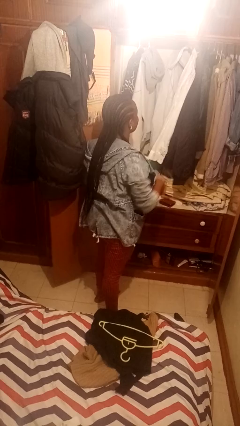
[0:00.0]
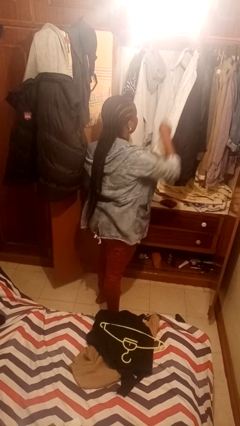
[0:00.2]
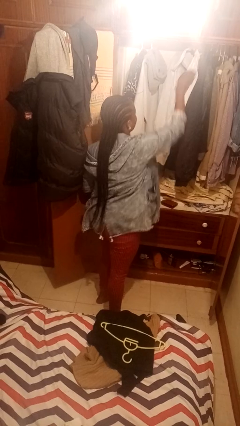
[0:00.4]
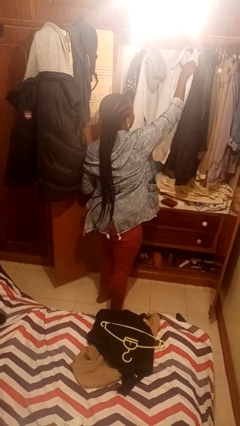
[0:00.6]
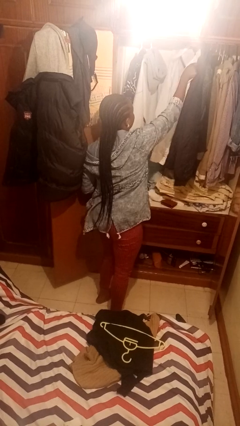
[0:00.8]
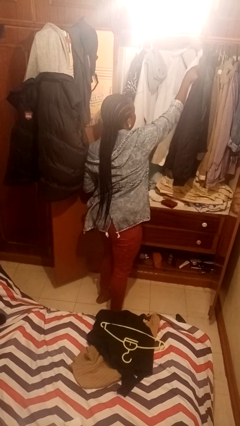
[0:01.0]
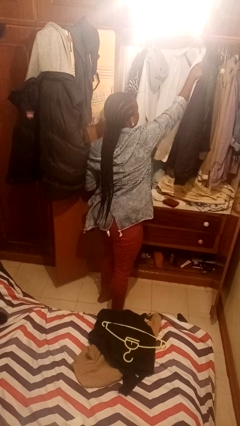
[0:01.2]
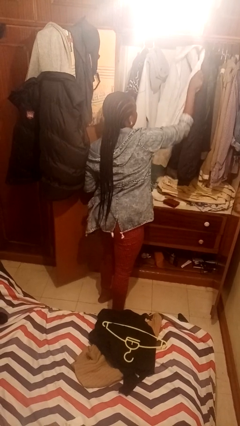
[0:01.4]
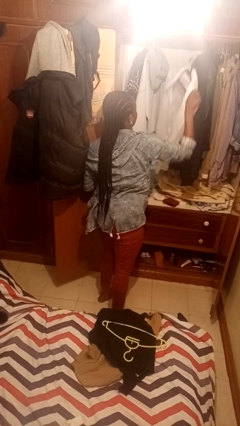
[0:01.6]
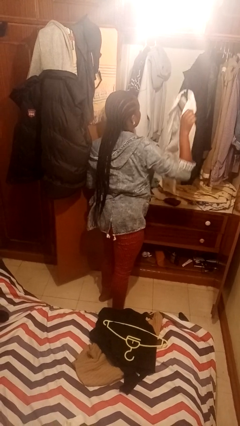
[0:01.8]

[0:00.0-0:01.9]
person takes clothes from closet

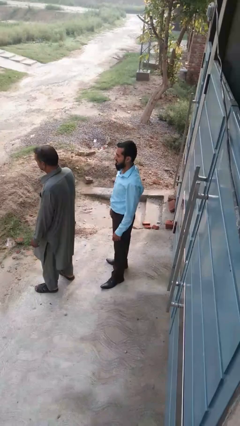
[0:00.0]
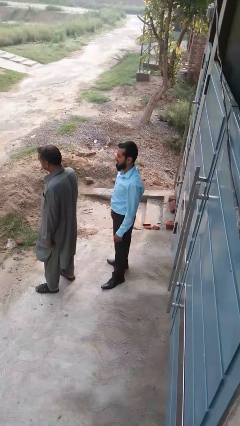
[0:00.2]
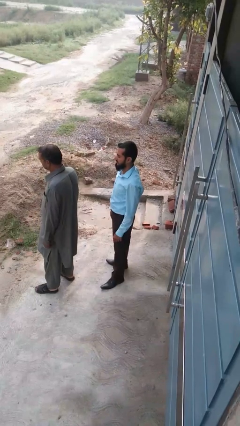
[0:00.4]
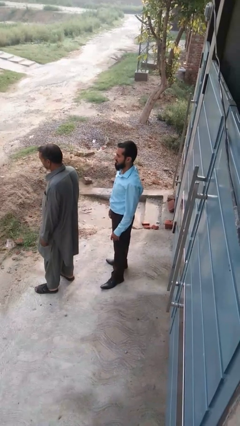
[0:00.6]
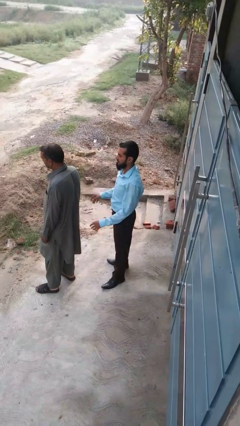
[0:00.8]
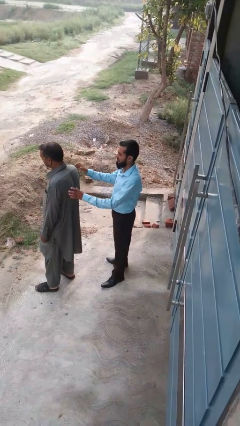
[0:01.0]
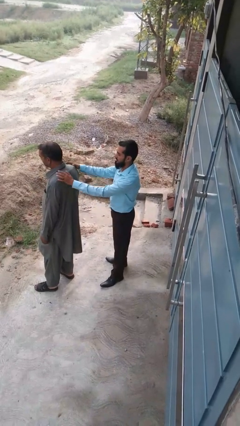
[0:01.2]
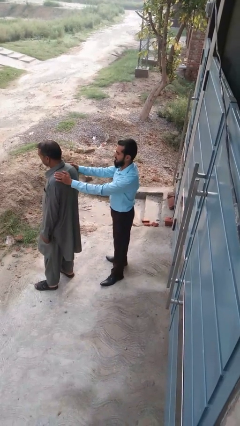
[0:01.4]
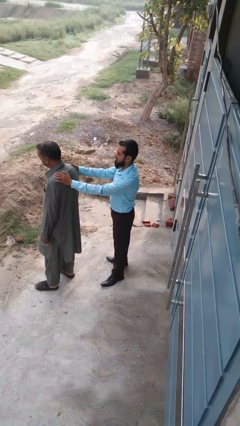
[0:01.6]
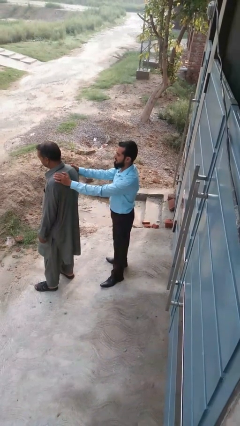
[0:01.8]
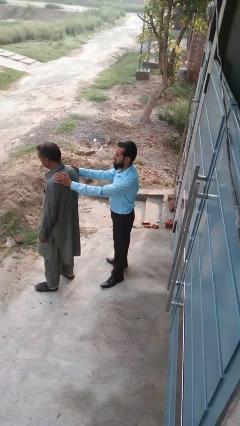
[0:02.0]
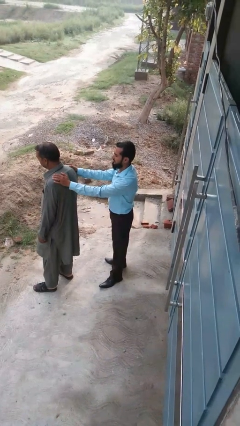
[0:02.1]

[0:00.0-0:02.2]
person grabs person by shoulder

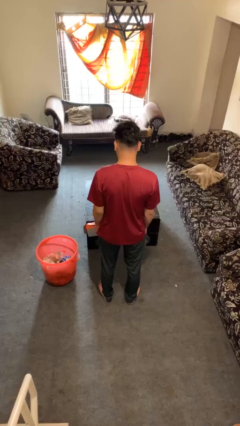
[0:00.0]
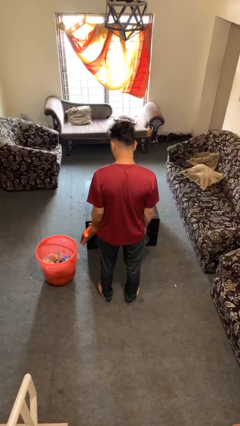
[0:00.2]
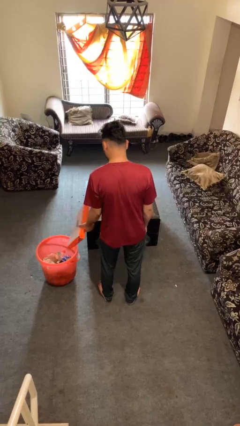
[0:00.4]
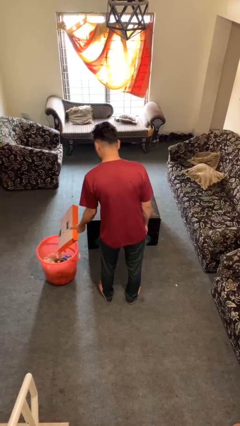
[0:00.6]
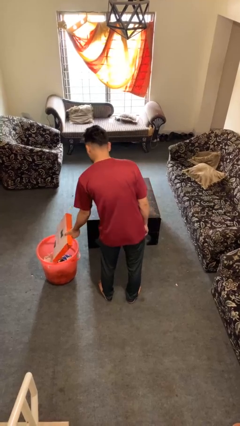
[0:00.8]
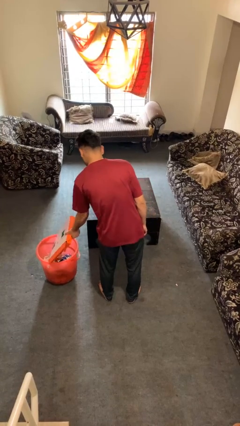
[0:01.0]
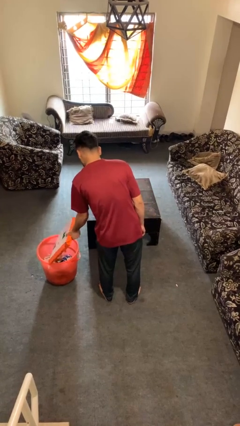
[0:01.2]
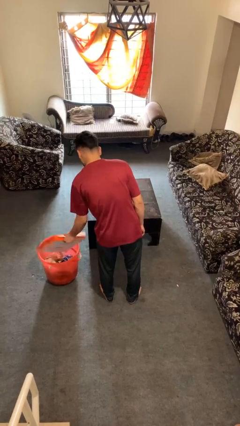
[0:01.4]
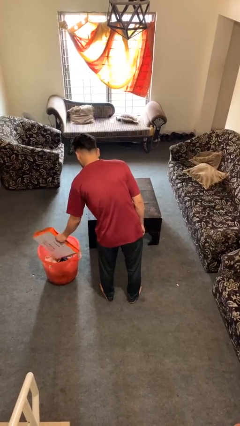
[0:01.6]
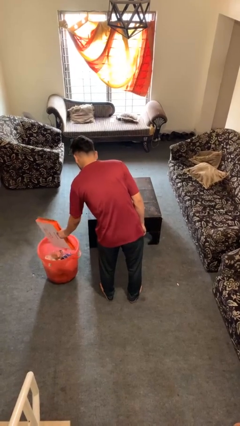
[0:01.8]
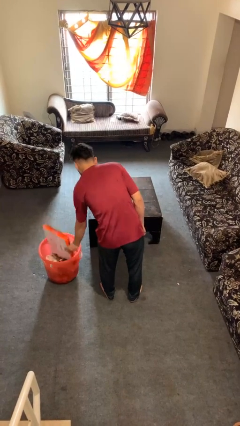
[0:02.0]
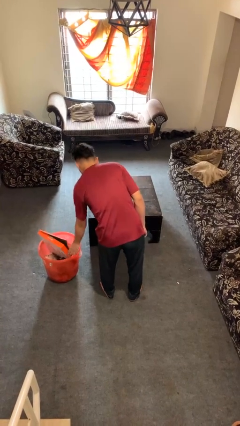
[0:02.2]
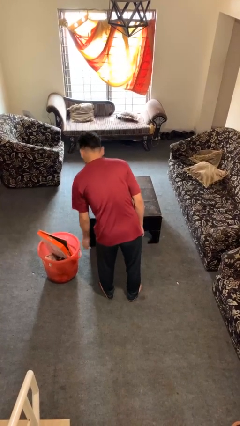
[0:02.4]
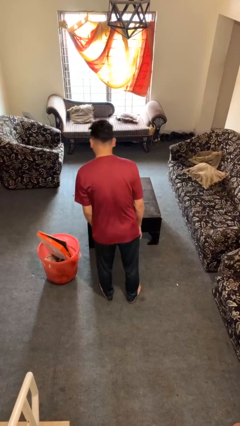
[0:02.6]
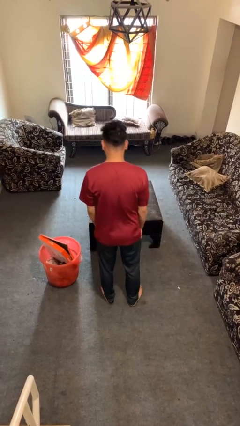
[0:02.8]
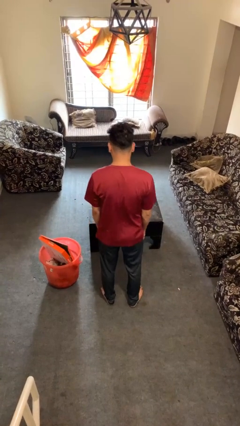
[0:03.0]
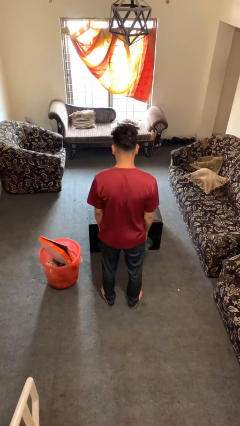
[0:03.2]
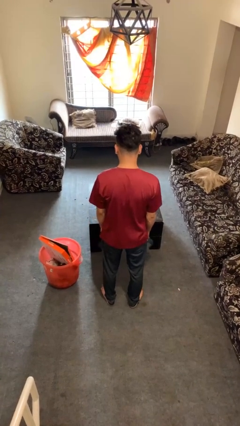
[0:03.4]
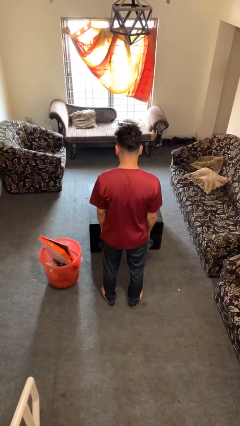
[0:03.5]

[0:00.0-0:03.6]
person puts object into basket

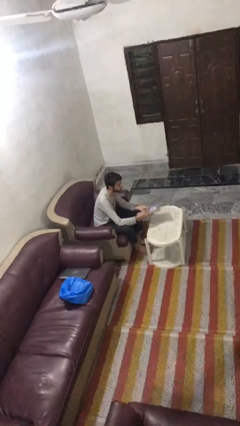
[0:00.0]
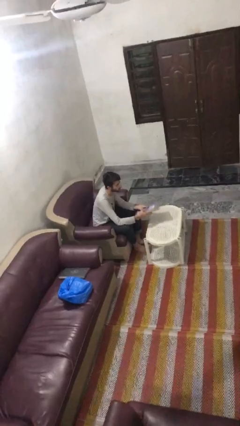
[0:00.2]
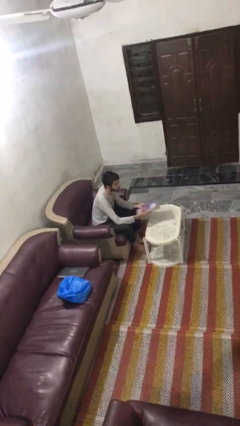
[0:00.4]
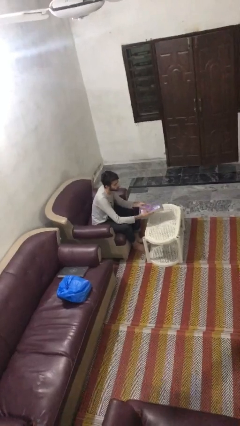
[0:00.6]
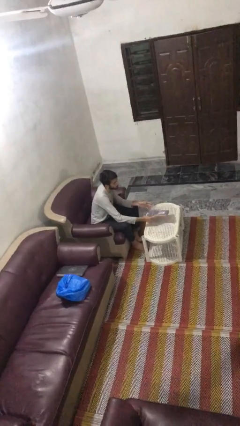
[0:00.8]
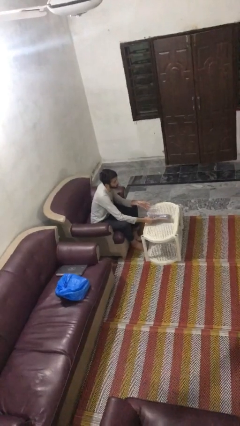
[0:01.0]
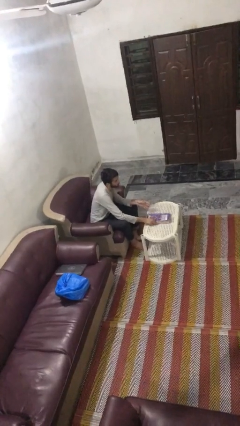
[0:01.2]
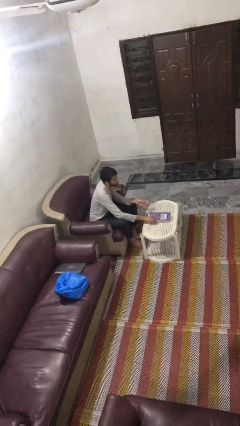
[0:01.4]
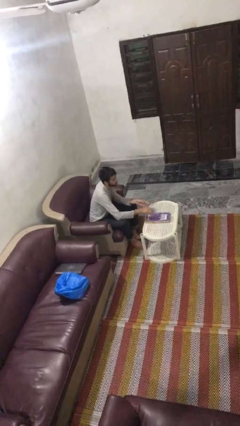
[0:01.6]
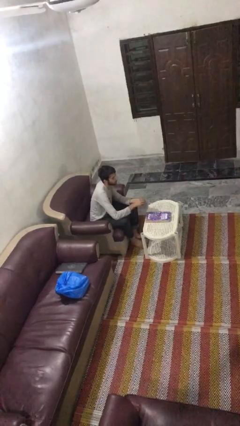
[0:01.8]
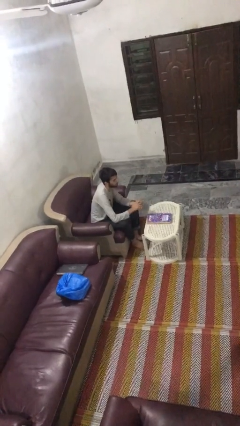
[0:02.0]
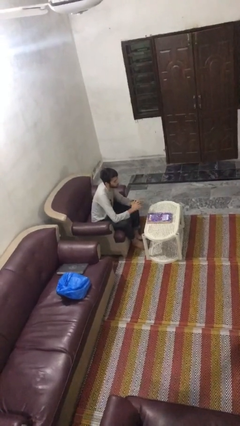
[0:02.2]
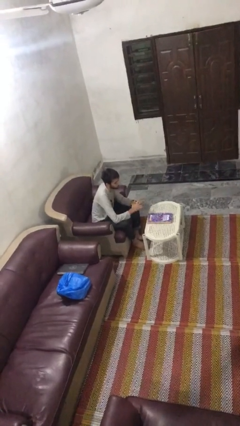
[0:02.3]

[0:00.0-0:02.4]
person puts down object on table

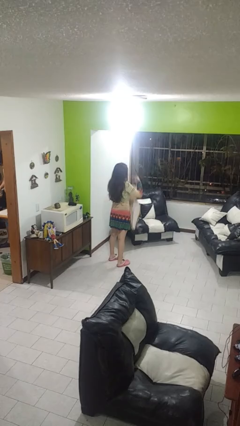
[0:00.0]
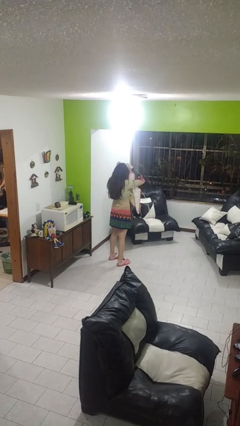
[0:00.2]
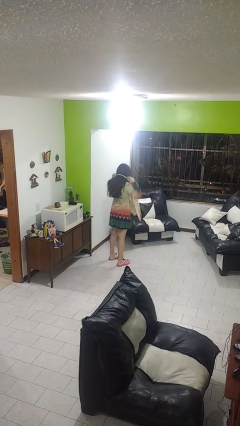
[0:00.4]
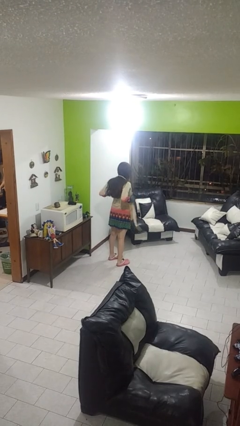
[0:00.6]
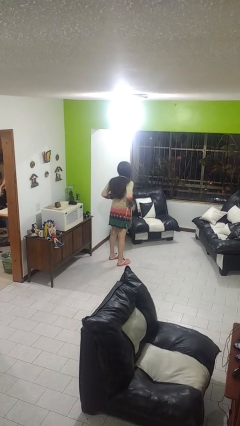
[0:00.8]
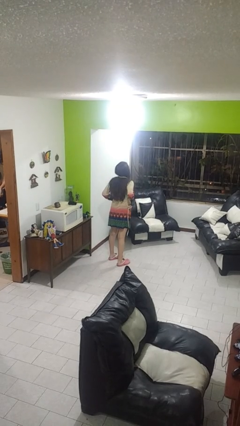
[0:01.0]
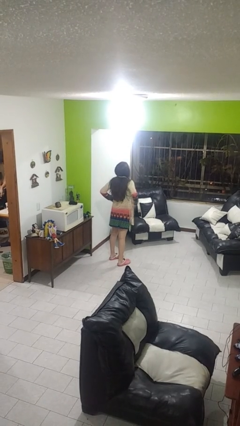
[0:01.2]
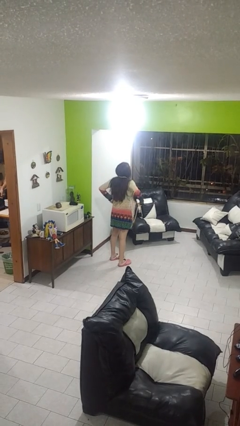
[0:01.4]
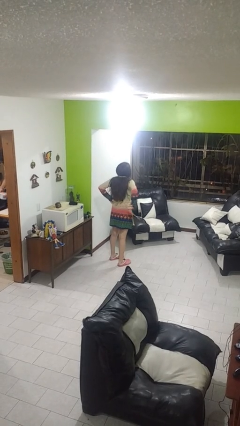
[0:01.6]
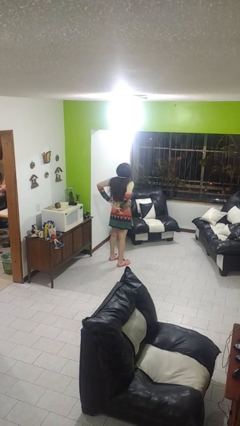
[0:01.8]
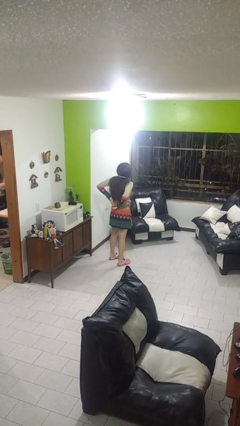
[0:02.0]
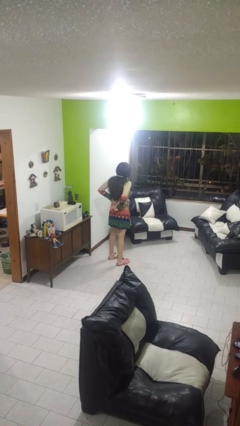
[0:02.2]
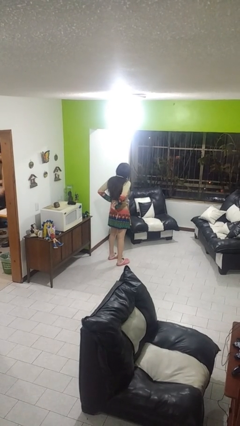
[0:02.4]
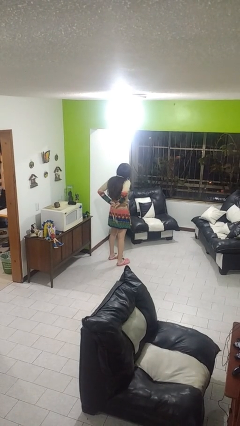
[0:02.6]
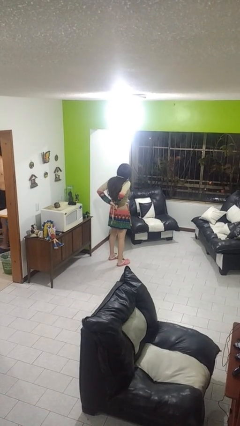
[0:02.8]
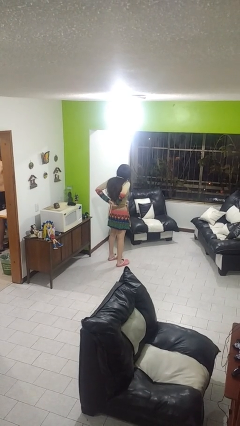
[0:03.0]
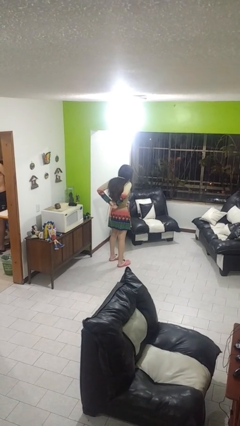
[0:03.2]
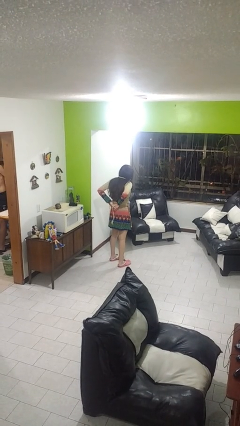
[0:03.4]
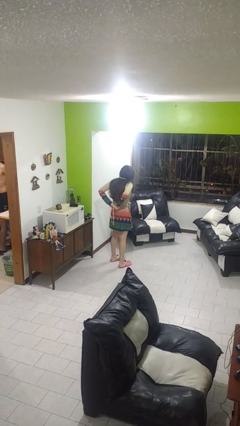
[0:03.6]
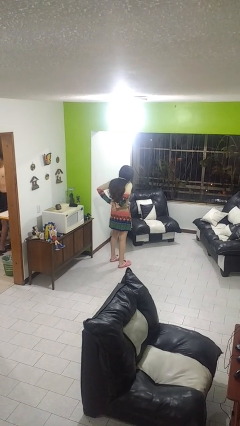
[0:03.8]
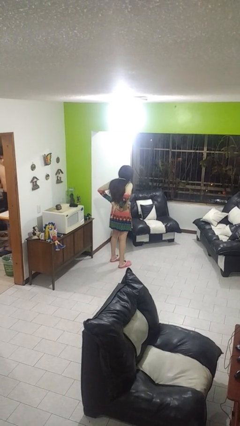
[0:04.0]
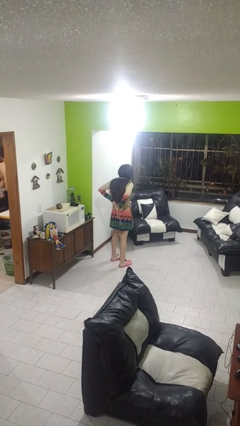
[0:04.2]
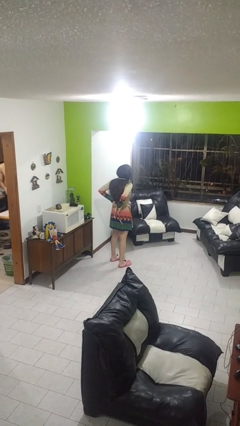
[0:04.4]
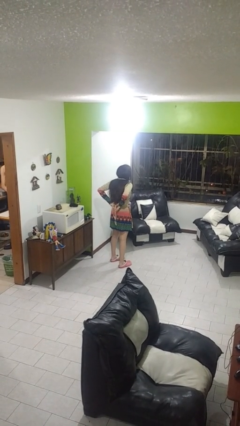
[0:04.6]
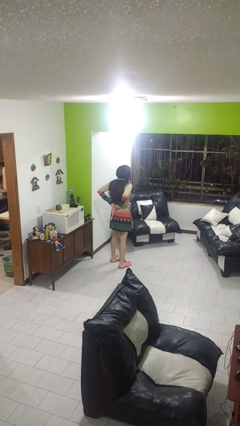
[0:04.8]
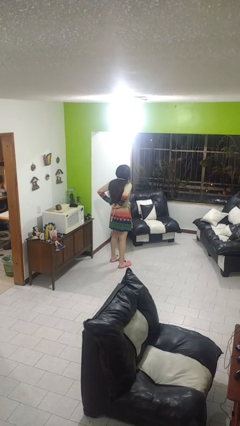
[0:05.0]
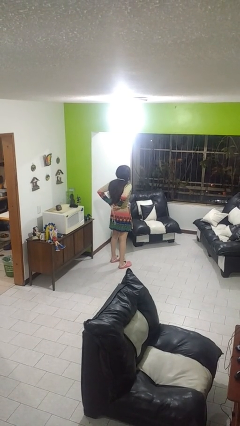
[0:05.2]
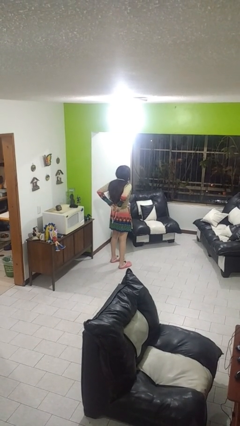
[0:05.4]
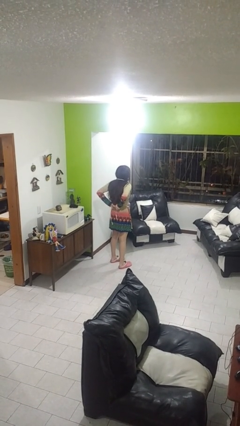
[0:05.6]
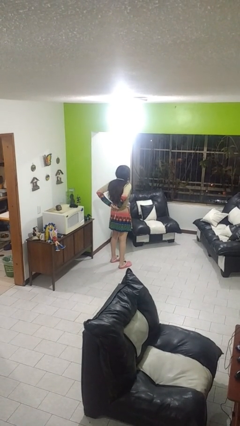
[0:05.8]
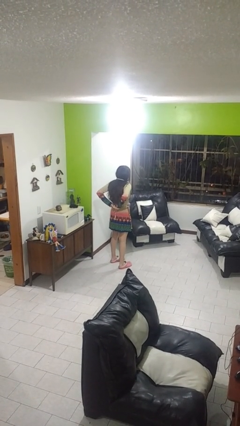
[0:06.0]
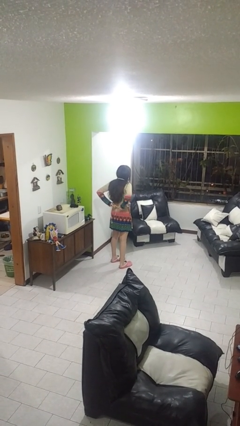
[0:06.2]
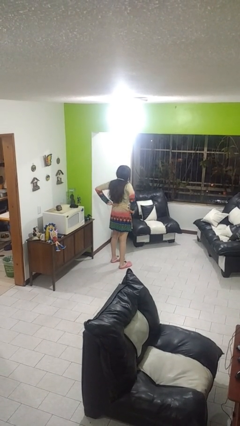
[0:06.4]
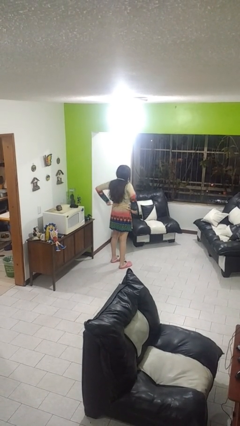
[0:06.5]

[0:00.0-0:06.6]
person puts on apron

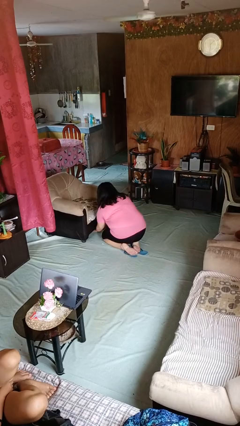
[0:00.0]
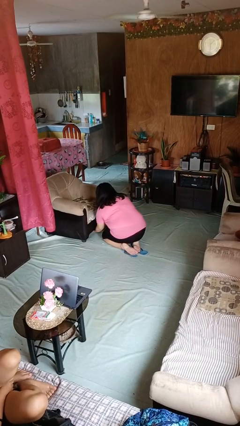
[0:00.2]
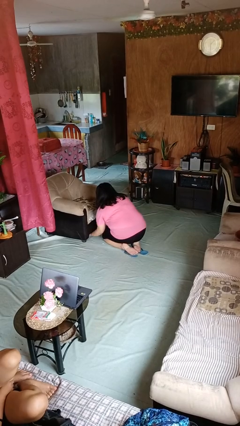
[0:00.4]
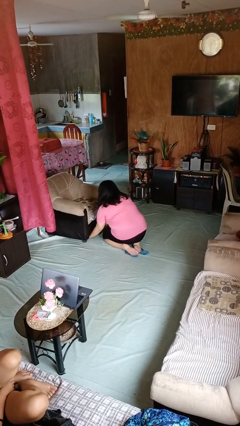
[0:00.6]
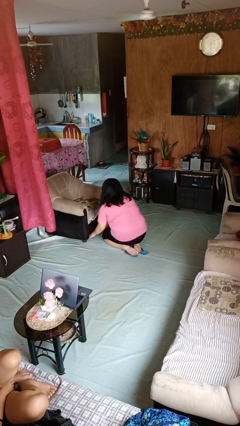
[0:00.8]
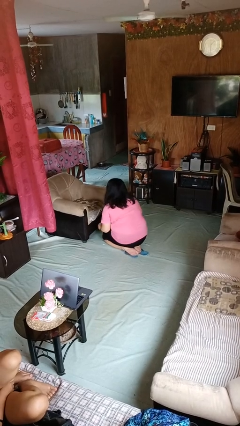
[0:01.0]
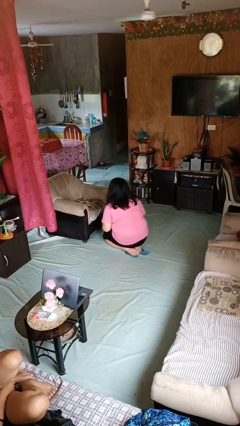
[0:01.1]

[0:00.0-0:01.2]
person searches under couch
